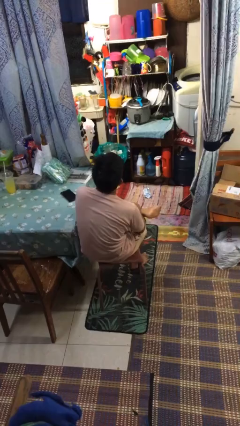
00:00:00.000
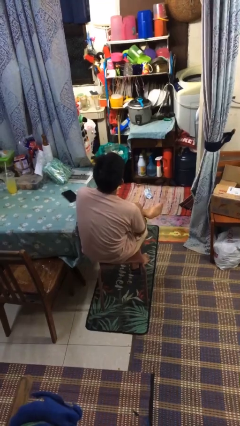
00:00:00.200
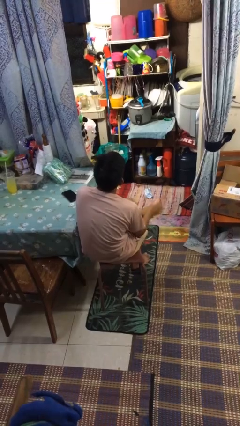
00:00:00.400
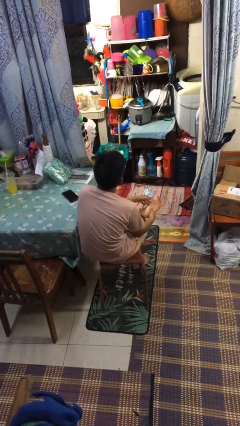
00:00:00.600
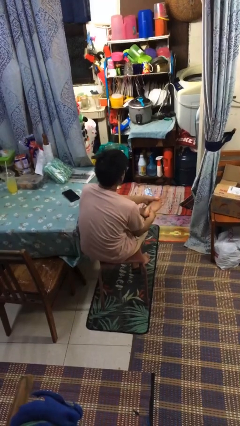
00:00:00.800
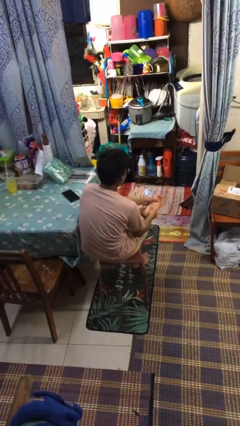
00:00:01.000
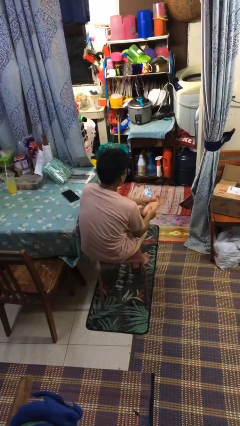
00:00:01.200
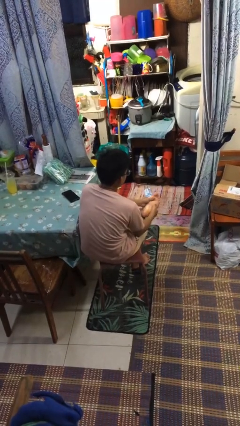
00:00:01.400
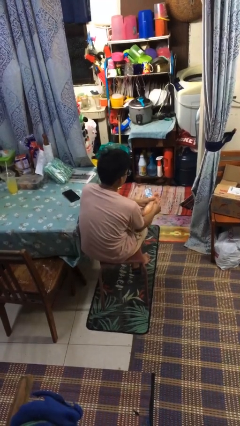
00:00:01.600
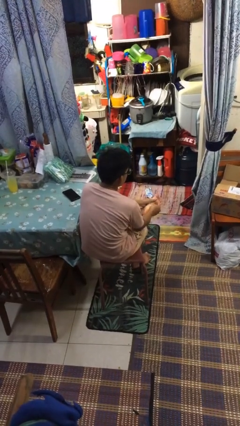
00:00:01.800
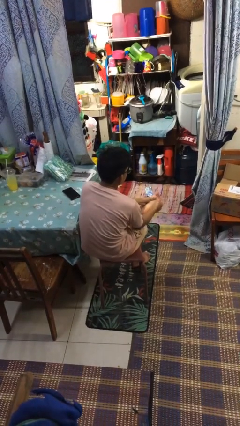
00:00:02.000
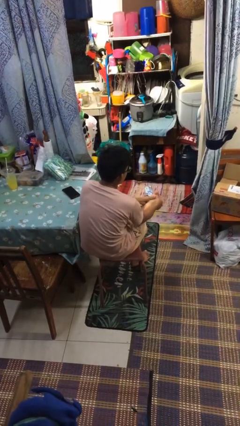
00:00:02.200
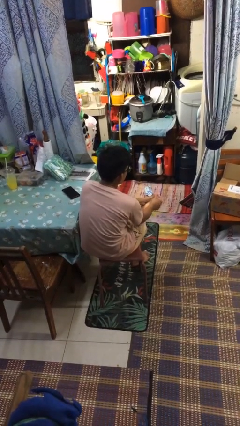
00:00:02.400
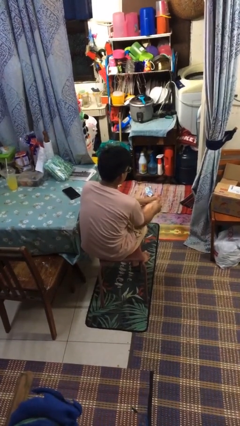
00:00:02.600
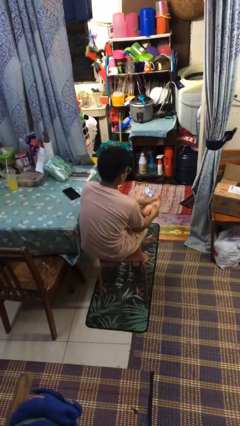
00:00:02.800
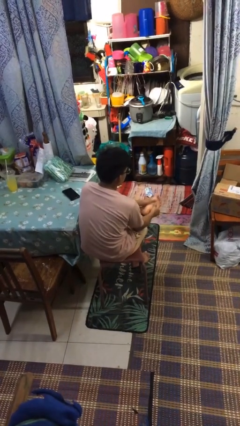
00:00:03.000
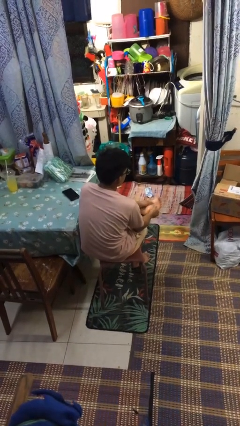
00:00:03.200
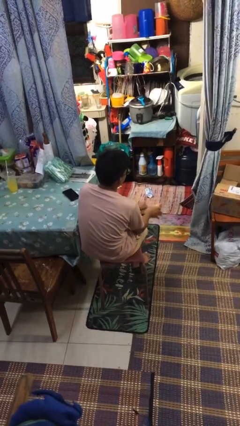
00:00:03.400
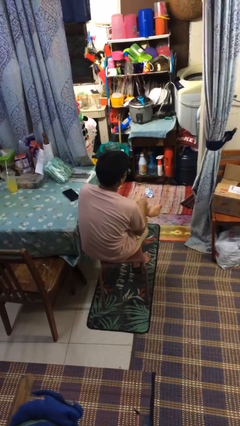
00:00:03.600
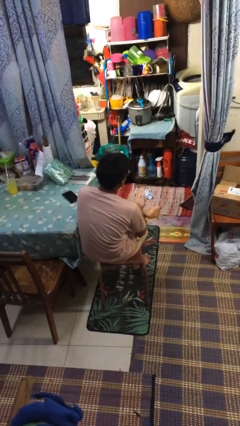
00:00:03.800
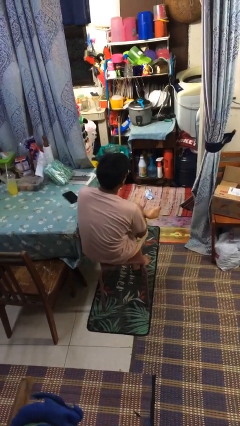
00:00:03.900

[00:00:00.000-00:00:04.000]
person rubs foot

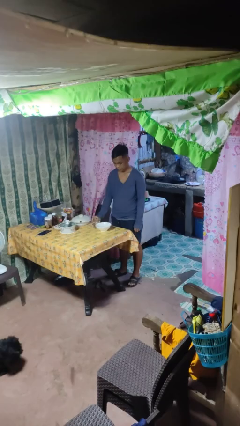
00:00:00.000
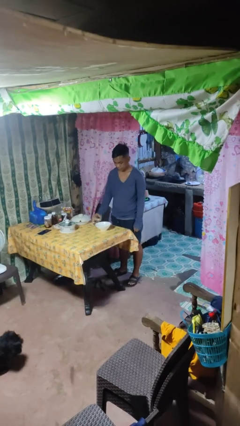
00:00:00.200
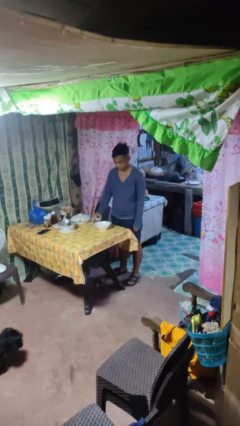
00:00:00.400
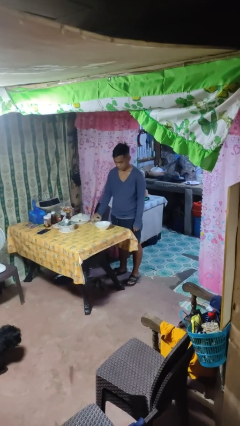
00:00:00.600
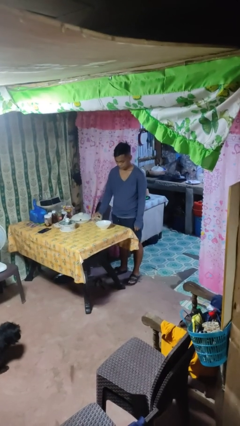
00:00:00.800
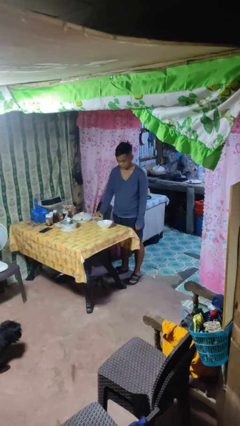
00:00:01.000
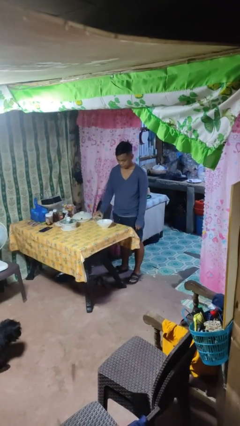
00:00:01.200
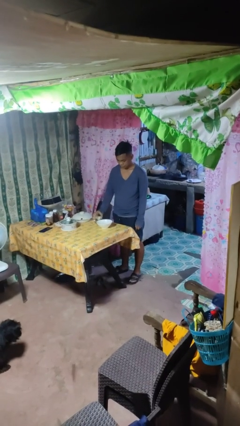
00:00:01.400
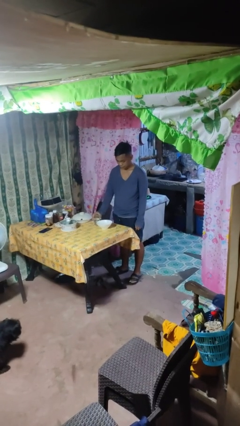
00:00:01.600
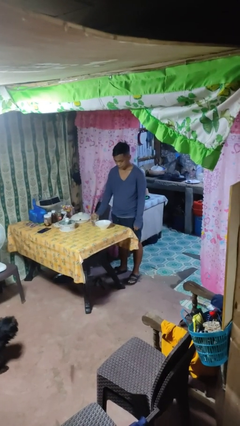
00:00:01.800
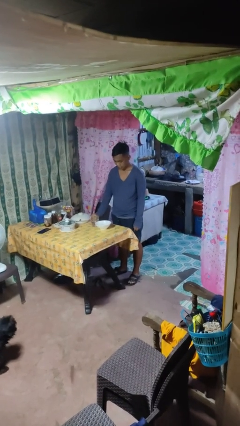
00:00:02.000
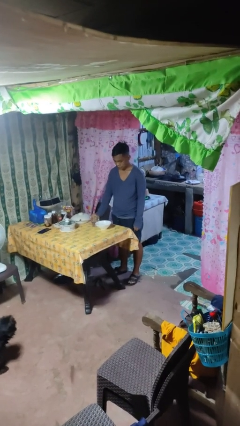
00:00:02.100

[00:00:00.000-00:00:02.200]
person pours into bowl

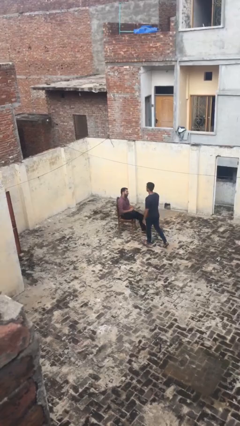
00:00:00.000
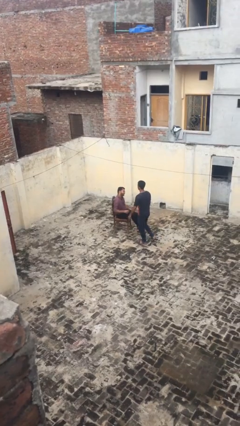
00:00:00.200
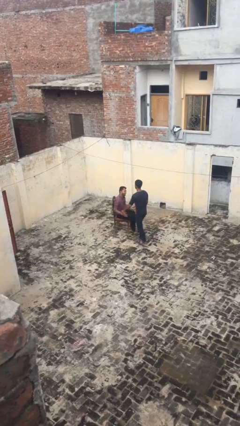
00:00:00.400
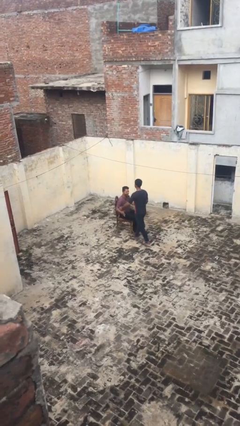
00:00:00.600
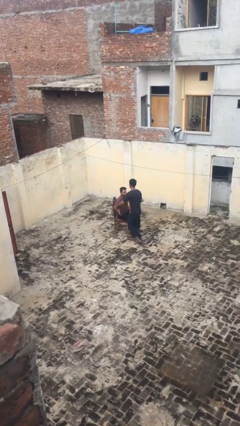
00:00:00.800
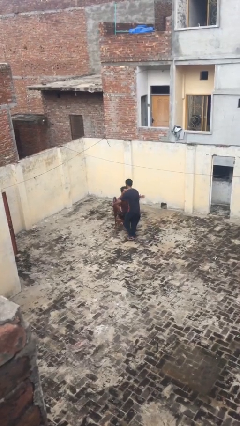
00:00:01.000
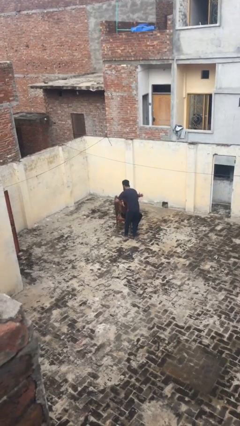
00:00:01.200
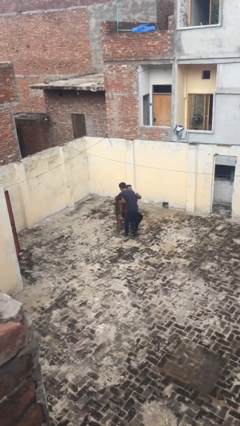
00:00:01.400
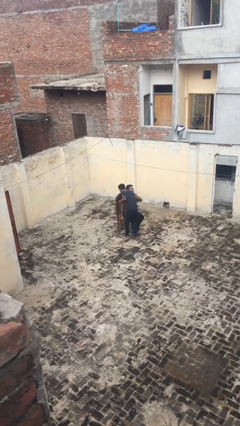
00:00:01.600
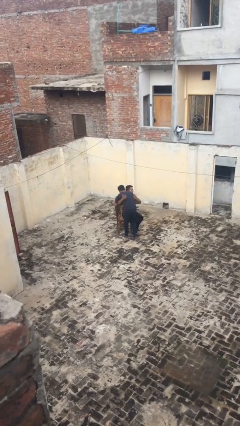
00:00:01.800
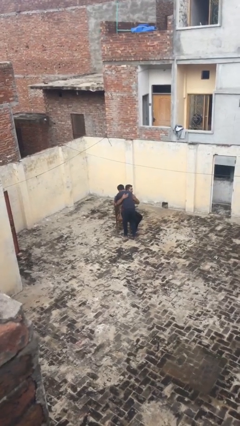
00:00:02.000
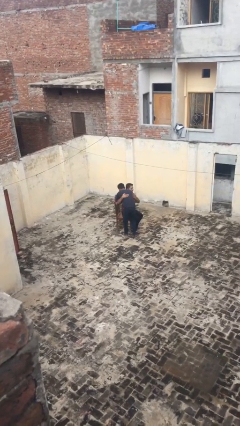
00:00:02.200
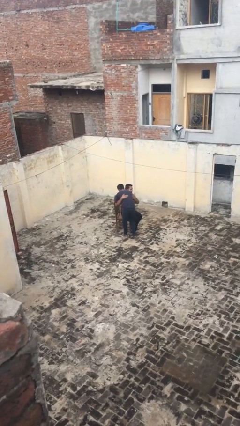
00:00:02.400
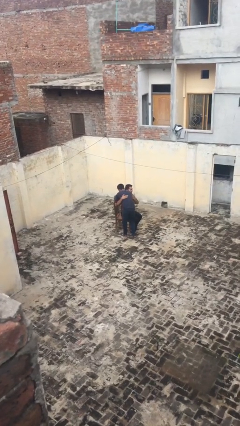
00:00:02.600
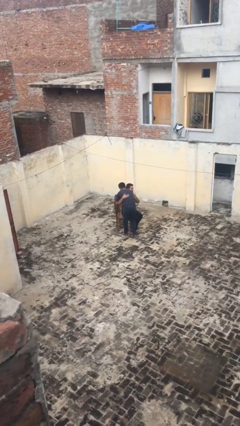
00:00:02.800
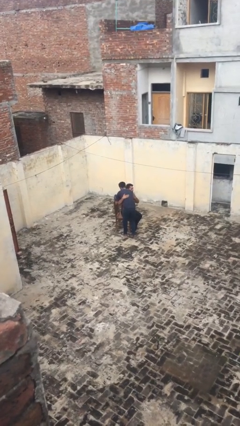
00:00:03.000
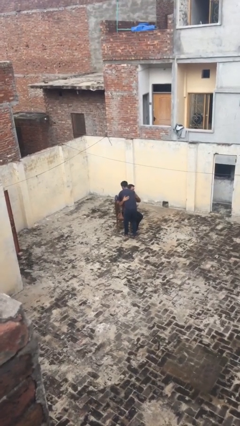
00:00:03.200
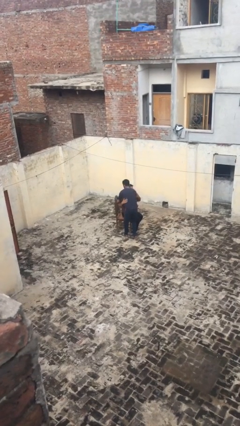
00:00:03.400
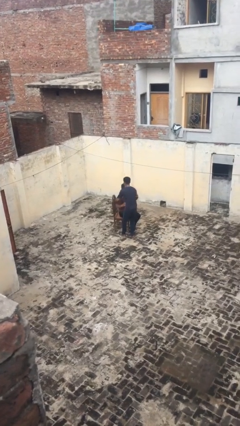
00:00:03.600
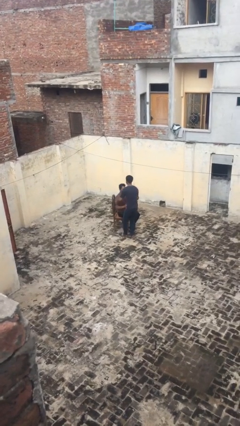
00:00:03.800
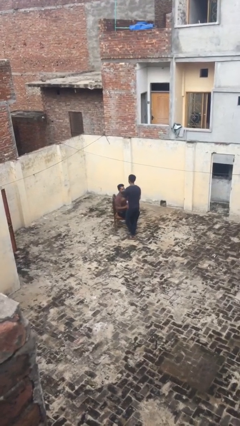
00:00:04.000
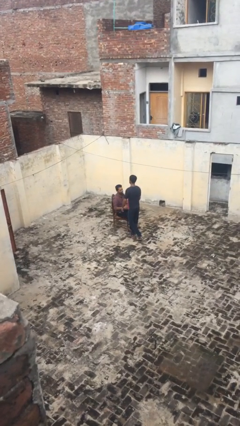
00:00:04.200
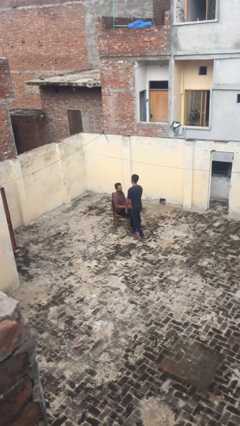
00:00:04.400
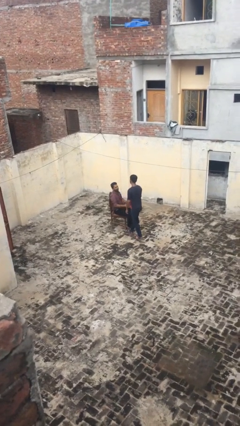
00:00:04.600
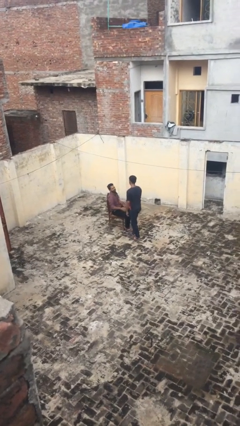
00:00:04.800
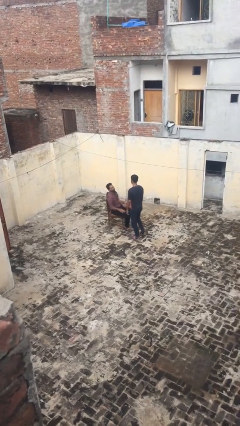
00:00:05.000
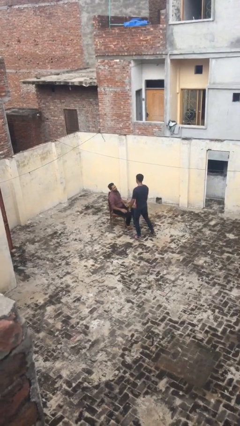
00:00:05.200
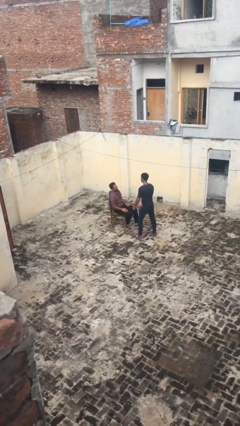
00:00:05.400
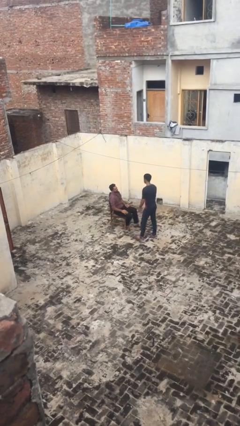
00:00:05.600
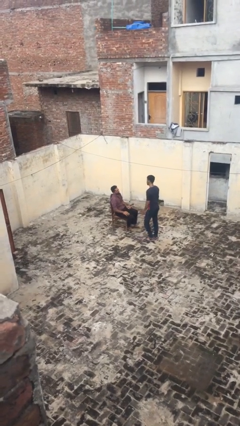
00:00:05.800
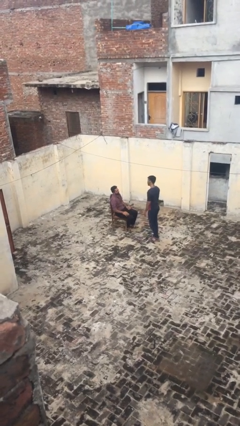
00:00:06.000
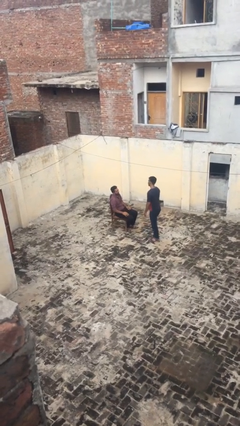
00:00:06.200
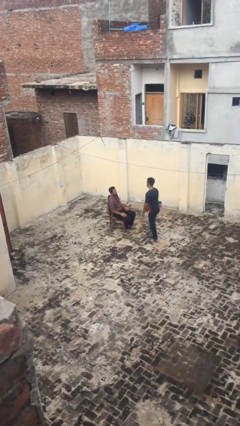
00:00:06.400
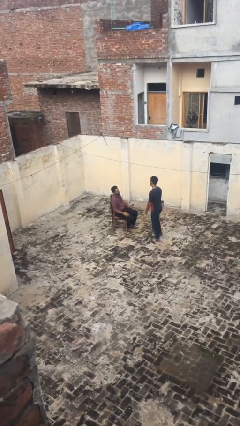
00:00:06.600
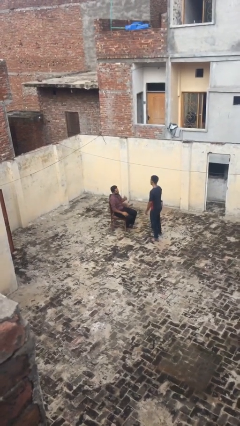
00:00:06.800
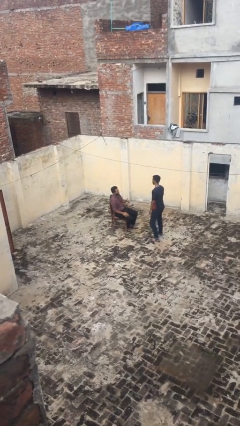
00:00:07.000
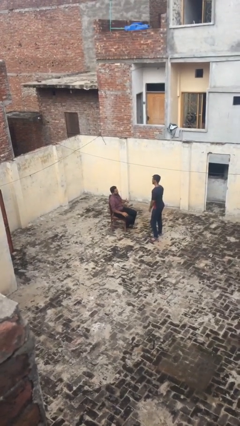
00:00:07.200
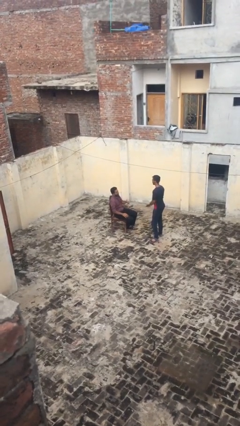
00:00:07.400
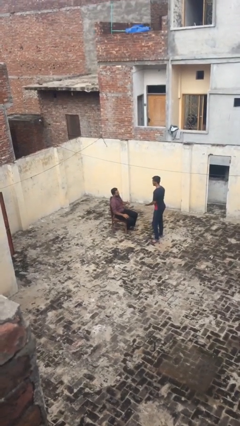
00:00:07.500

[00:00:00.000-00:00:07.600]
person embraces person

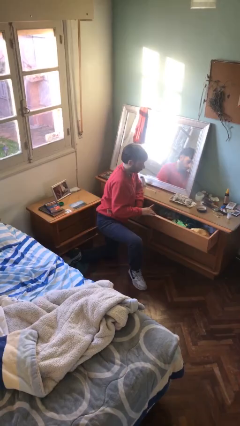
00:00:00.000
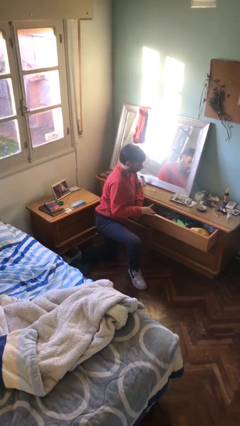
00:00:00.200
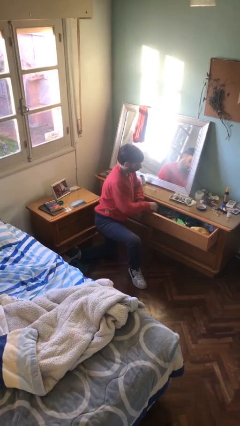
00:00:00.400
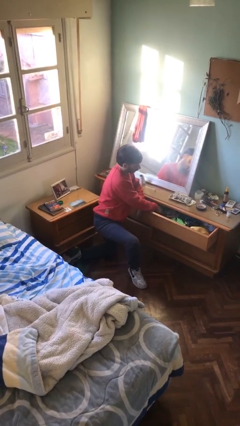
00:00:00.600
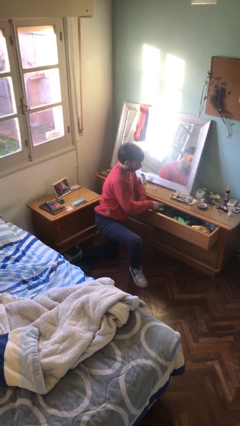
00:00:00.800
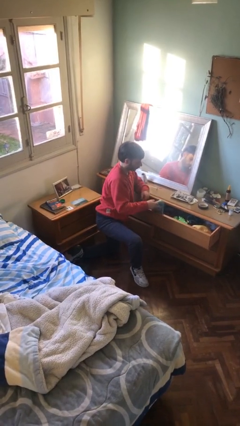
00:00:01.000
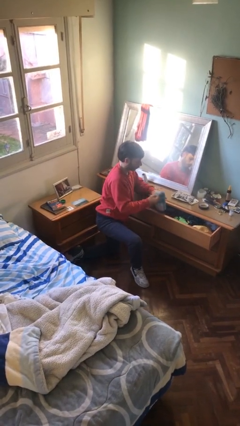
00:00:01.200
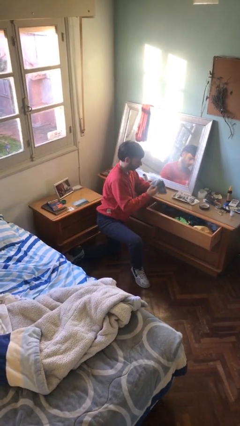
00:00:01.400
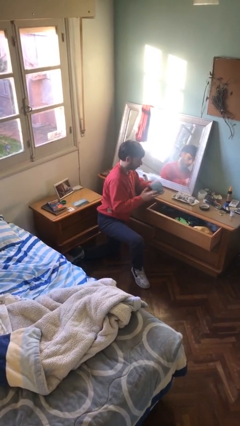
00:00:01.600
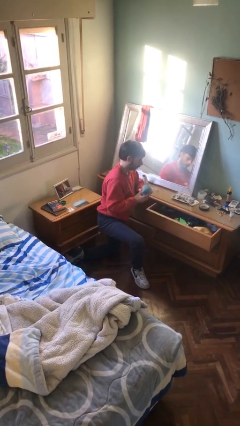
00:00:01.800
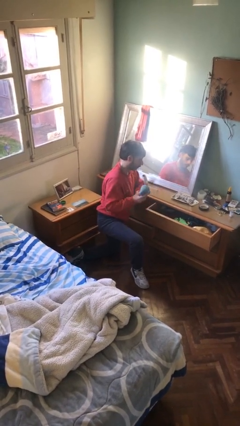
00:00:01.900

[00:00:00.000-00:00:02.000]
person takes clothes from dresser

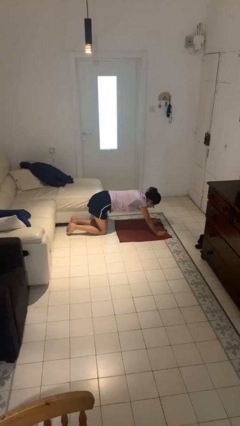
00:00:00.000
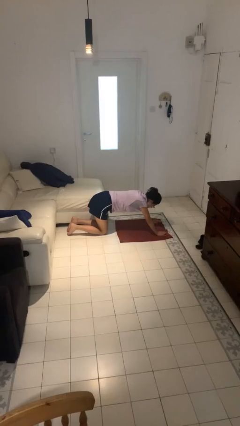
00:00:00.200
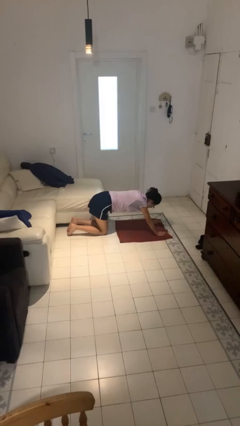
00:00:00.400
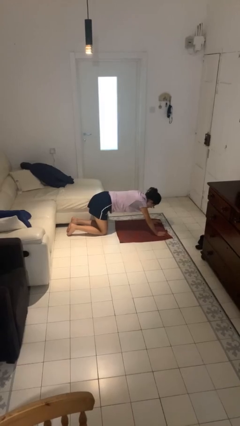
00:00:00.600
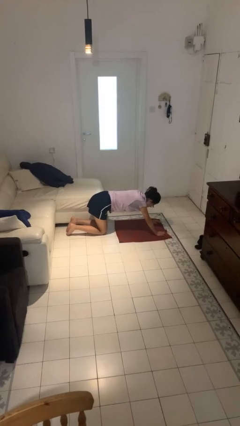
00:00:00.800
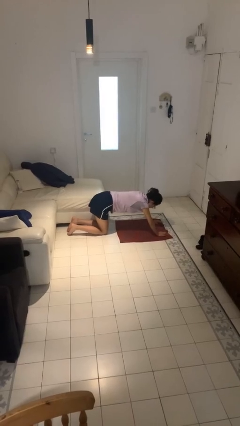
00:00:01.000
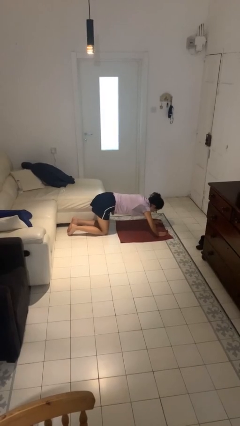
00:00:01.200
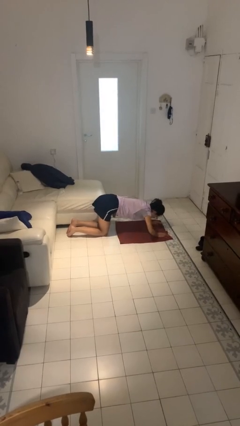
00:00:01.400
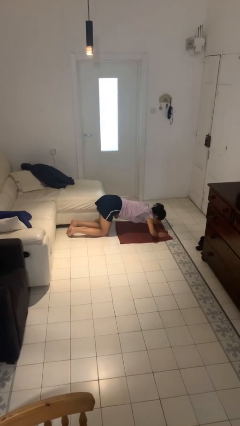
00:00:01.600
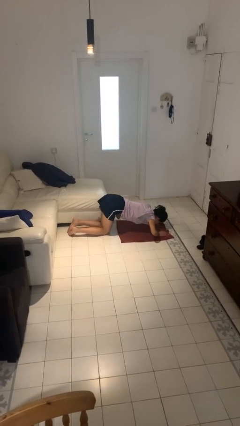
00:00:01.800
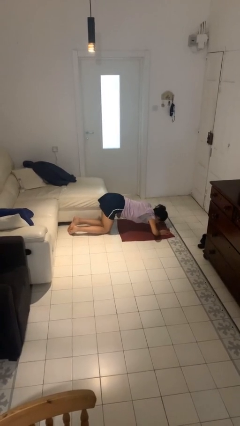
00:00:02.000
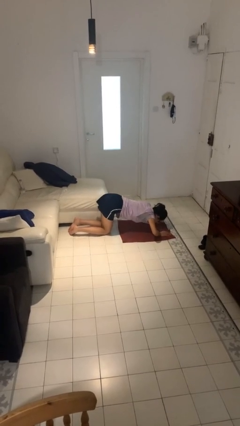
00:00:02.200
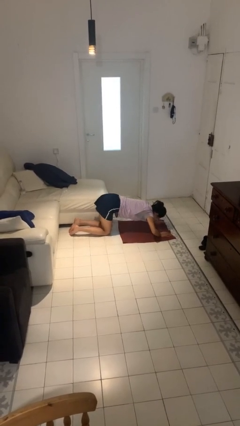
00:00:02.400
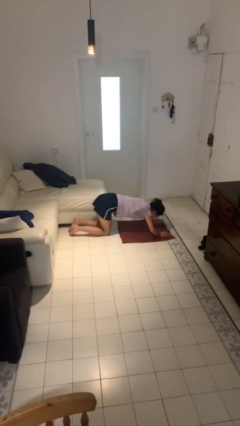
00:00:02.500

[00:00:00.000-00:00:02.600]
person exercises with pushup
